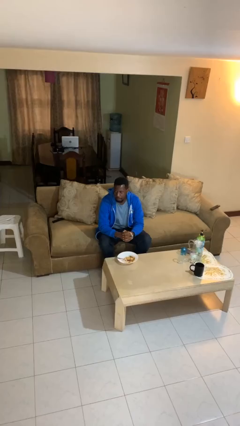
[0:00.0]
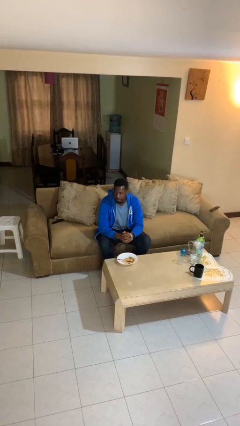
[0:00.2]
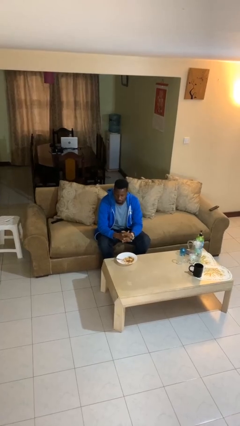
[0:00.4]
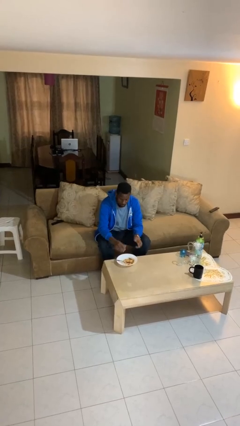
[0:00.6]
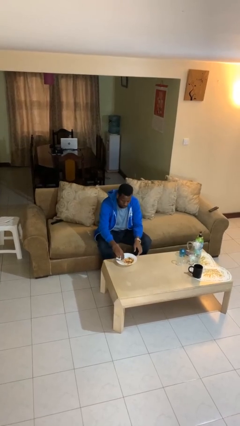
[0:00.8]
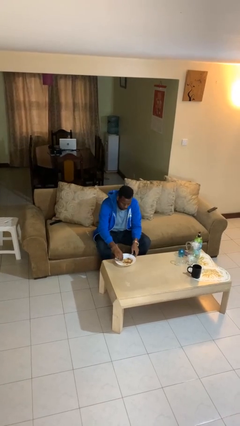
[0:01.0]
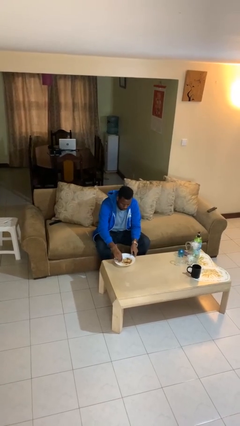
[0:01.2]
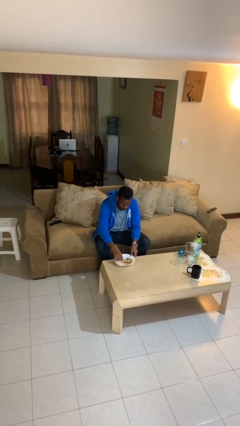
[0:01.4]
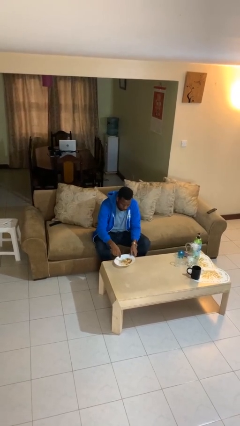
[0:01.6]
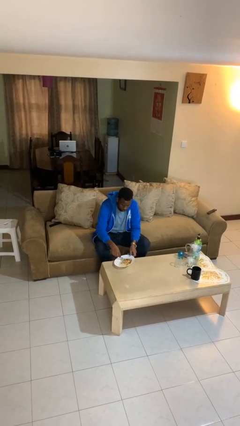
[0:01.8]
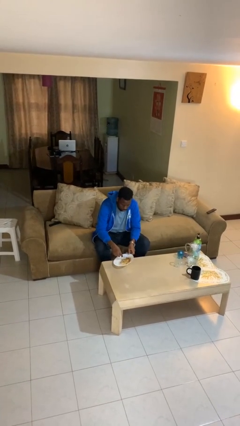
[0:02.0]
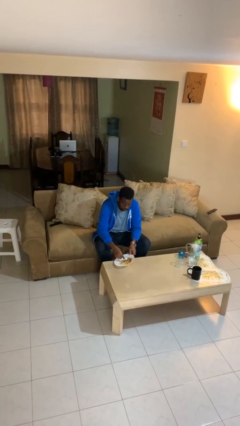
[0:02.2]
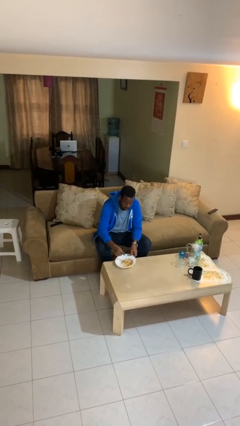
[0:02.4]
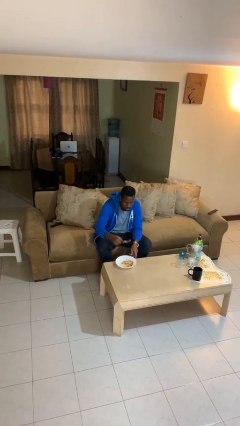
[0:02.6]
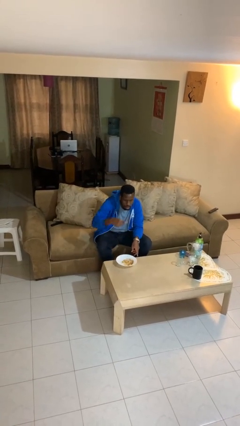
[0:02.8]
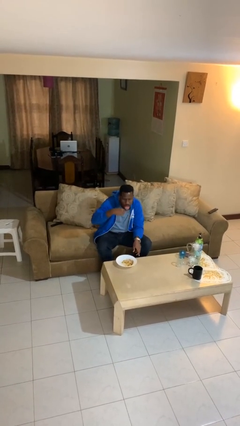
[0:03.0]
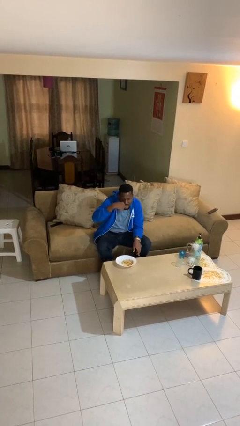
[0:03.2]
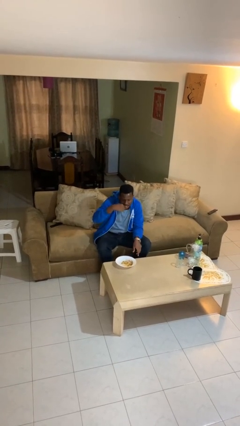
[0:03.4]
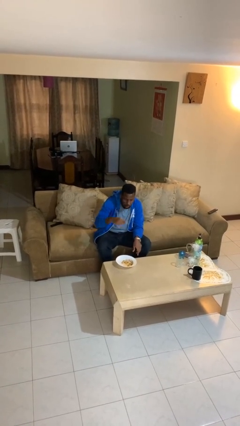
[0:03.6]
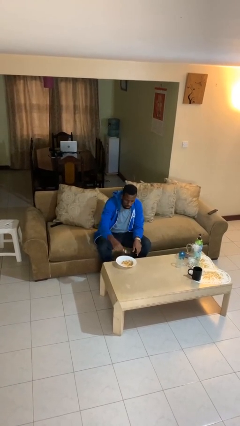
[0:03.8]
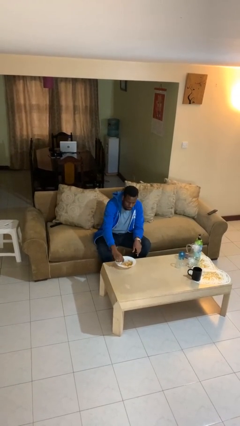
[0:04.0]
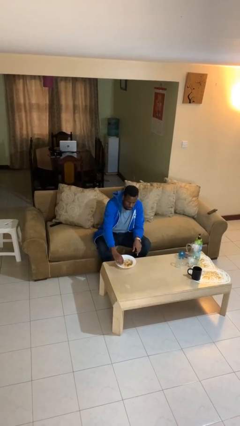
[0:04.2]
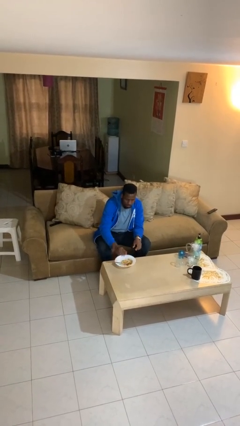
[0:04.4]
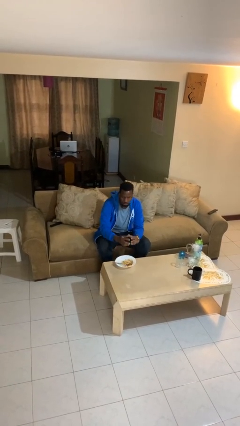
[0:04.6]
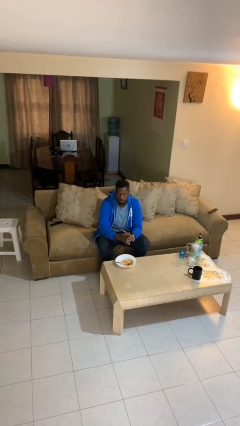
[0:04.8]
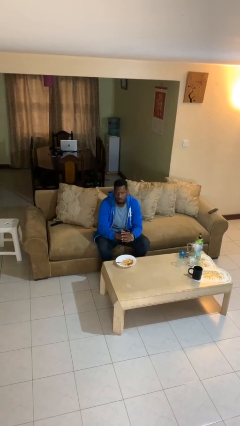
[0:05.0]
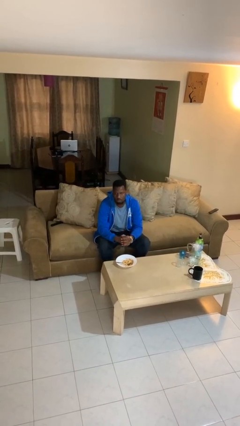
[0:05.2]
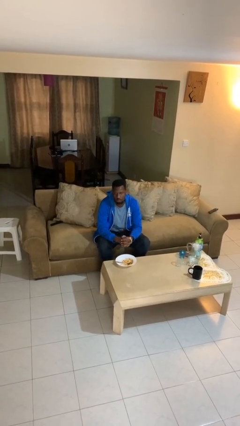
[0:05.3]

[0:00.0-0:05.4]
person eats with utensil

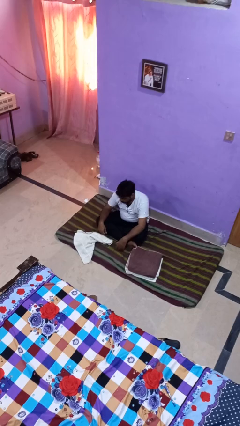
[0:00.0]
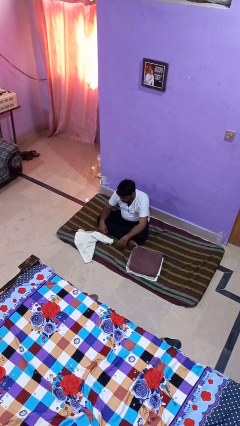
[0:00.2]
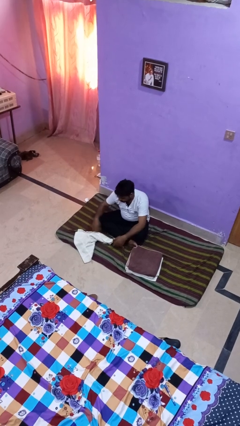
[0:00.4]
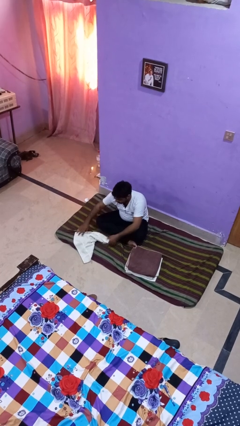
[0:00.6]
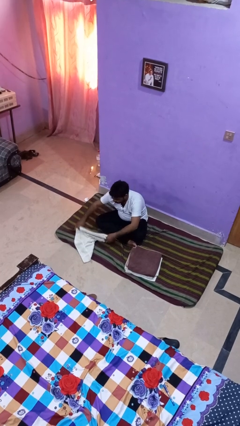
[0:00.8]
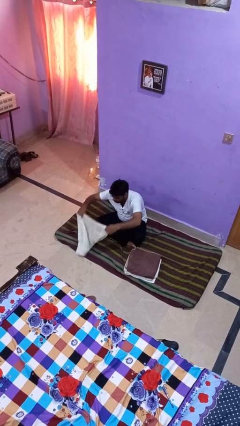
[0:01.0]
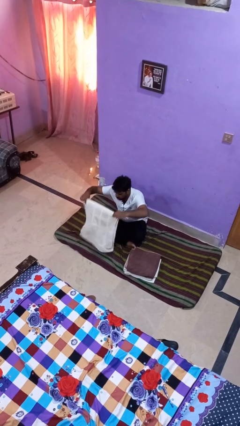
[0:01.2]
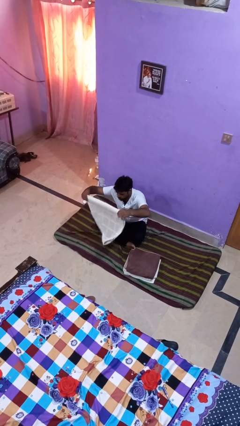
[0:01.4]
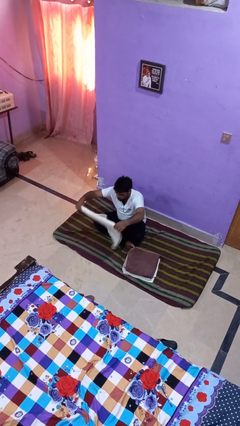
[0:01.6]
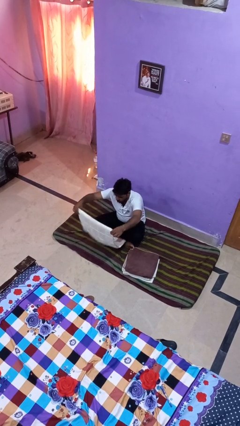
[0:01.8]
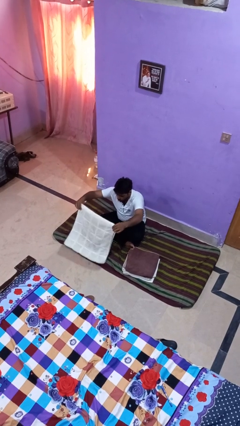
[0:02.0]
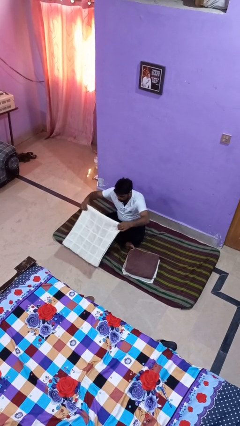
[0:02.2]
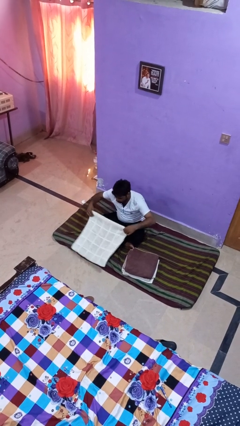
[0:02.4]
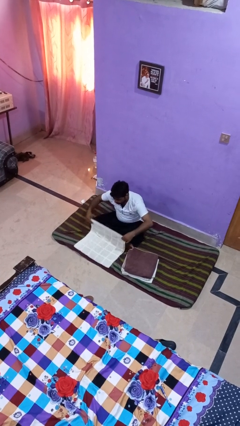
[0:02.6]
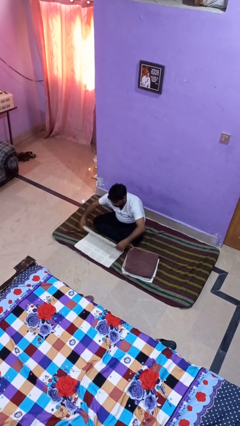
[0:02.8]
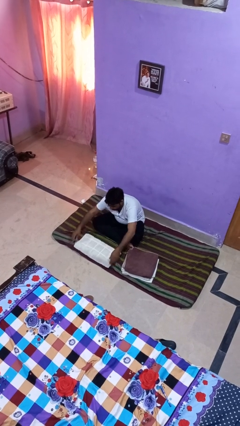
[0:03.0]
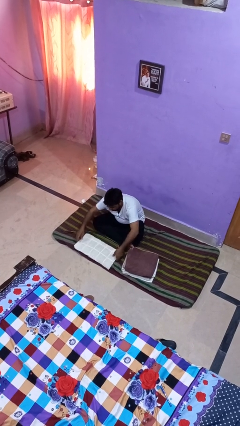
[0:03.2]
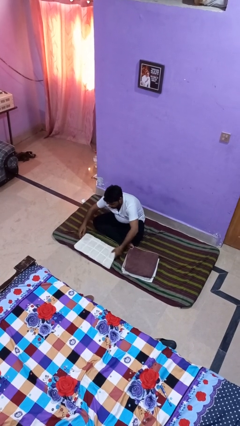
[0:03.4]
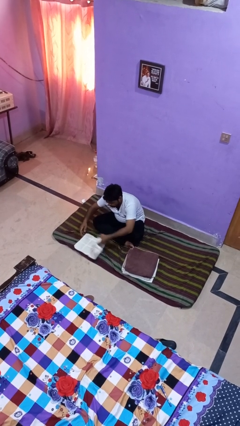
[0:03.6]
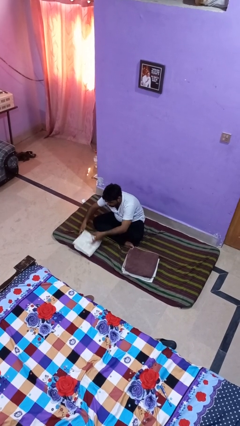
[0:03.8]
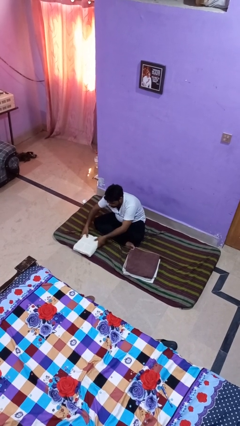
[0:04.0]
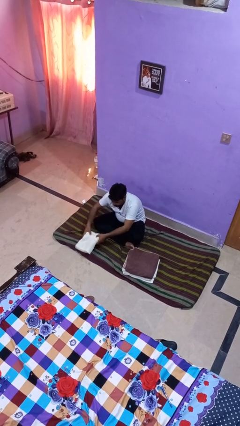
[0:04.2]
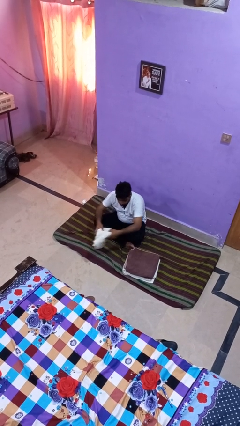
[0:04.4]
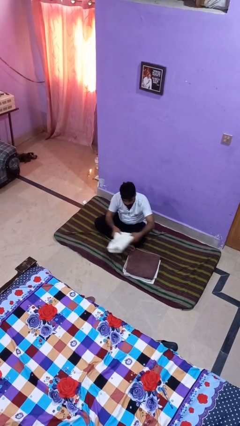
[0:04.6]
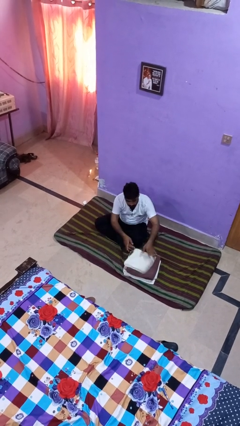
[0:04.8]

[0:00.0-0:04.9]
person folds towel

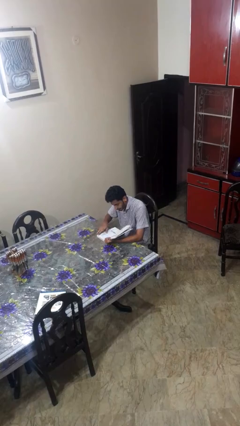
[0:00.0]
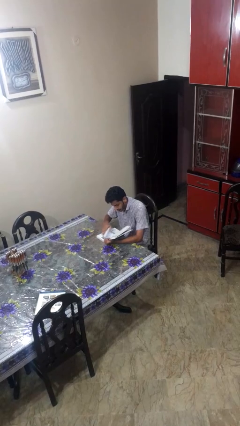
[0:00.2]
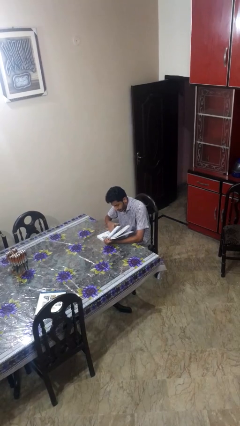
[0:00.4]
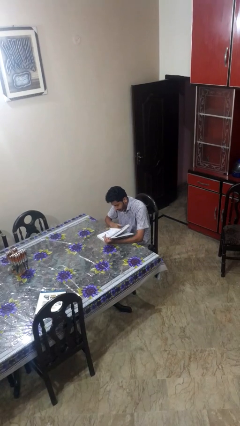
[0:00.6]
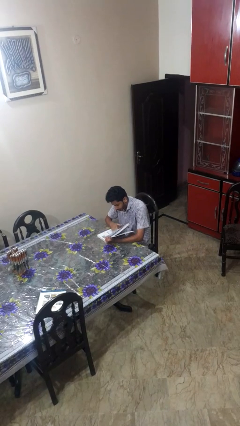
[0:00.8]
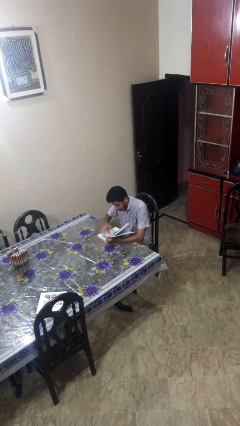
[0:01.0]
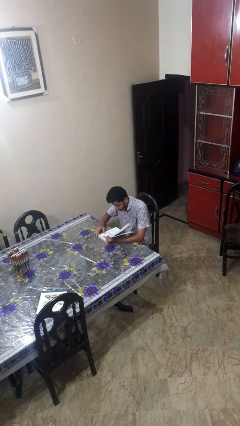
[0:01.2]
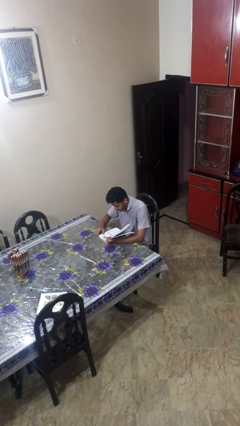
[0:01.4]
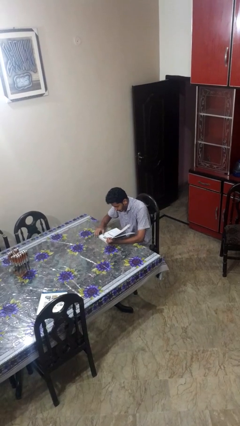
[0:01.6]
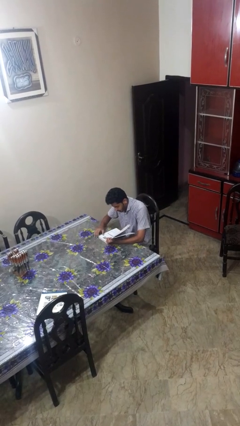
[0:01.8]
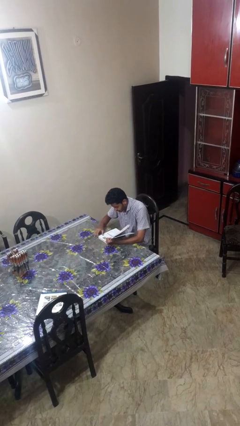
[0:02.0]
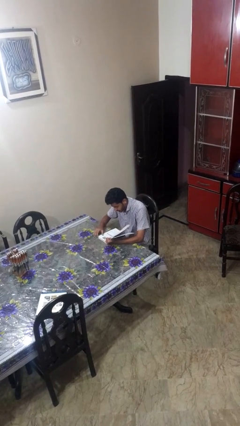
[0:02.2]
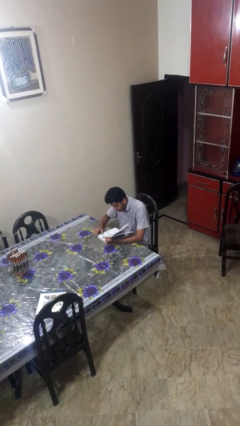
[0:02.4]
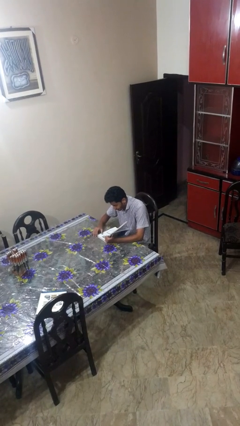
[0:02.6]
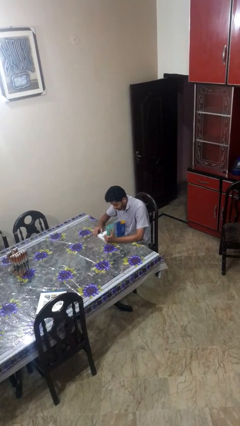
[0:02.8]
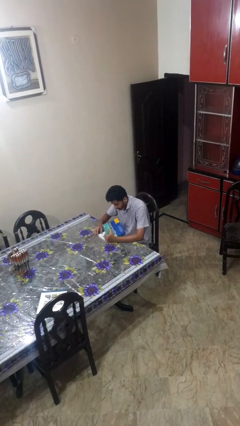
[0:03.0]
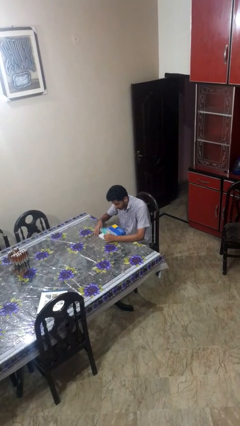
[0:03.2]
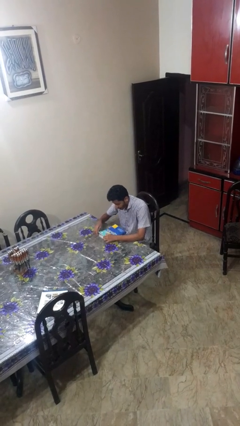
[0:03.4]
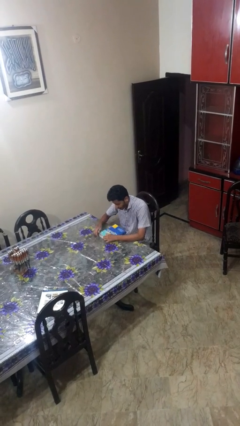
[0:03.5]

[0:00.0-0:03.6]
person reads book

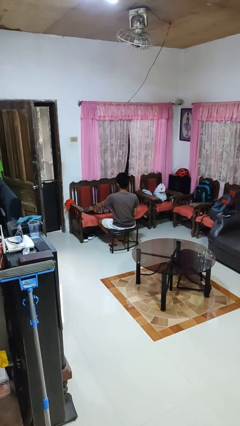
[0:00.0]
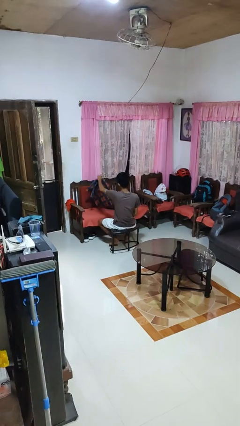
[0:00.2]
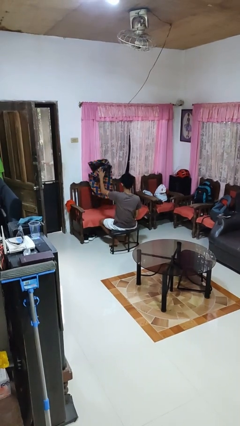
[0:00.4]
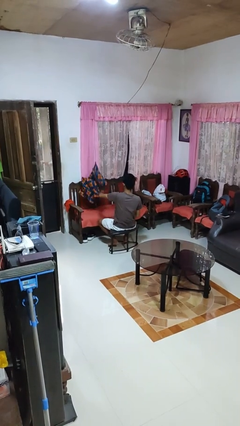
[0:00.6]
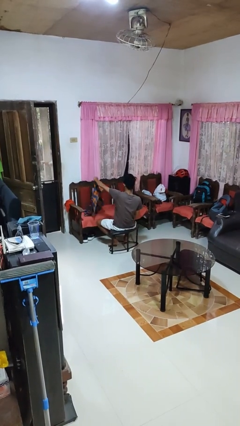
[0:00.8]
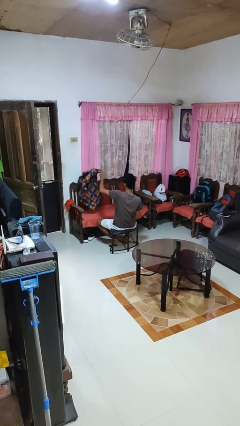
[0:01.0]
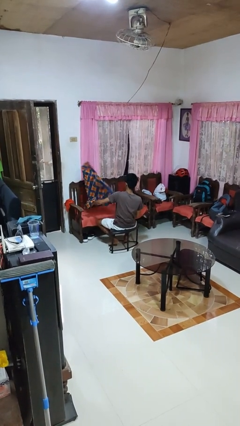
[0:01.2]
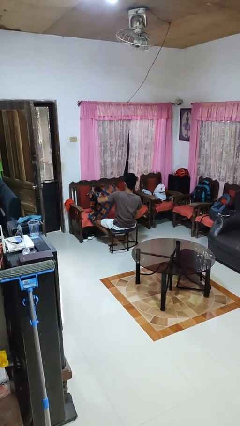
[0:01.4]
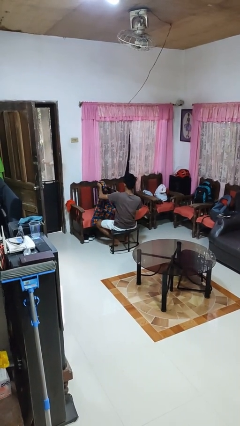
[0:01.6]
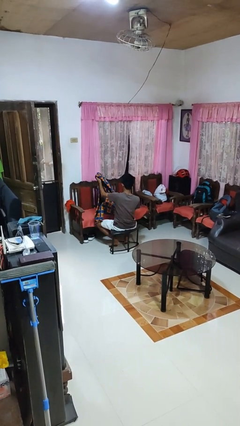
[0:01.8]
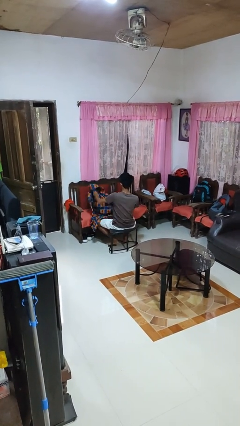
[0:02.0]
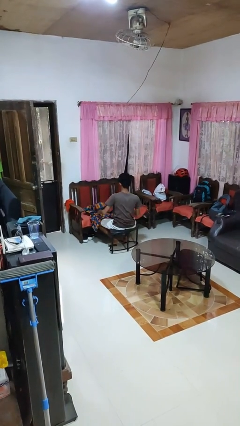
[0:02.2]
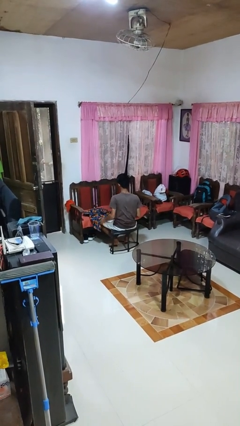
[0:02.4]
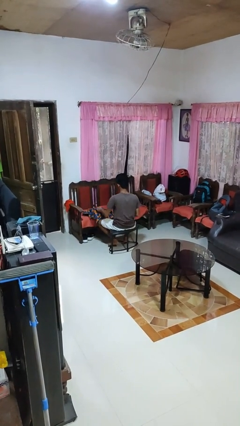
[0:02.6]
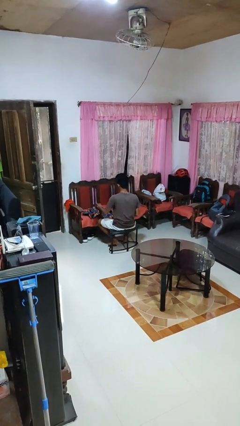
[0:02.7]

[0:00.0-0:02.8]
person unfolds blanket

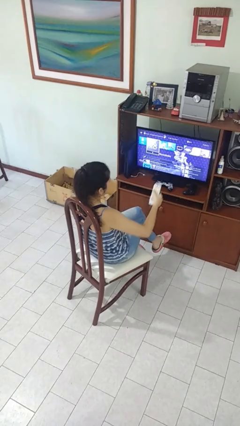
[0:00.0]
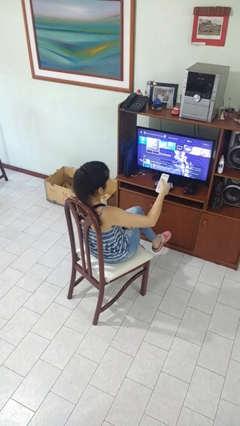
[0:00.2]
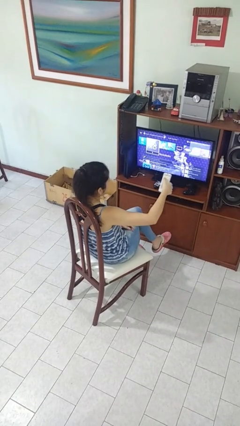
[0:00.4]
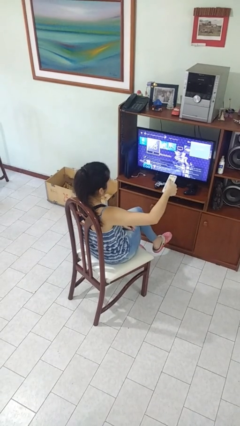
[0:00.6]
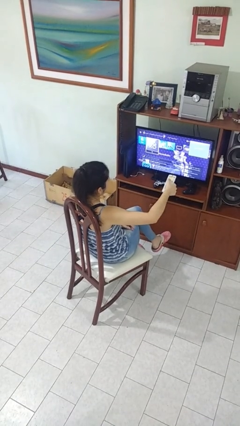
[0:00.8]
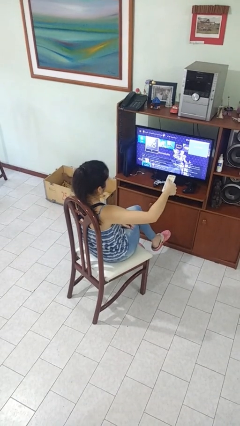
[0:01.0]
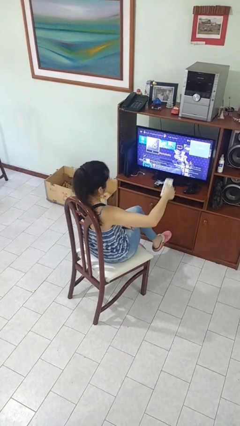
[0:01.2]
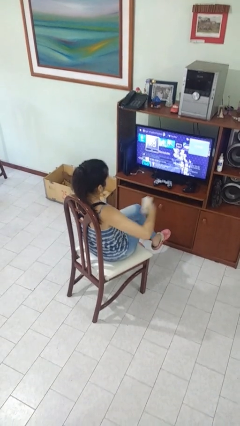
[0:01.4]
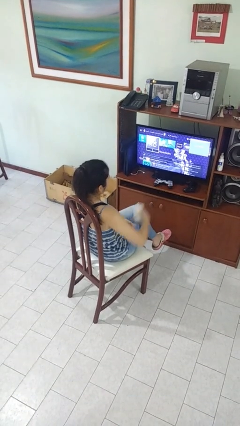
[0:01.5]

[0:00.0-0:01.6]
person uses television remote
